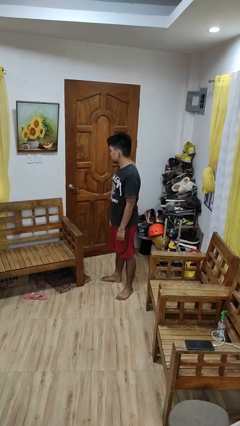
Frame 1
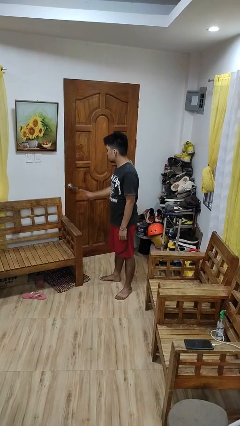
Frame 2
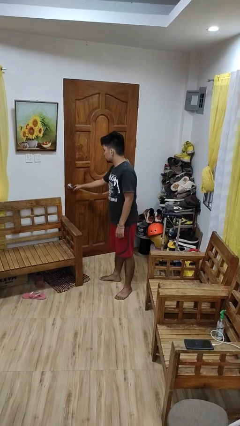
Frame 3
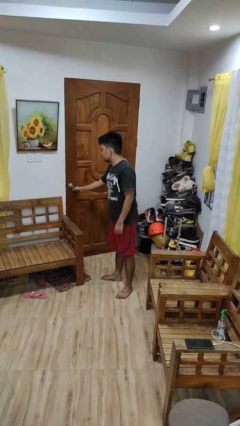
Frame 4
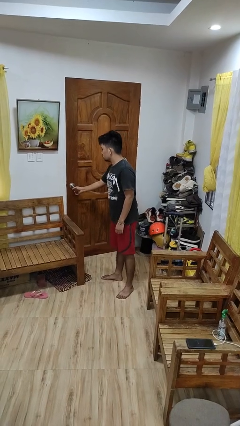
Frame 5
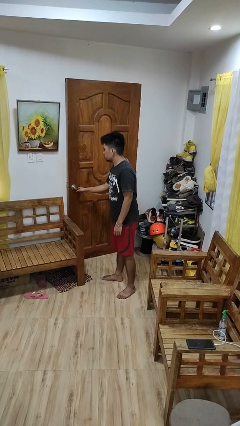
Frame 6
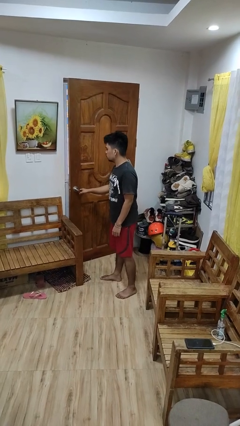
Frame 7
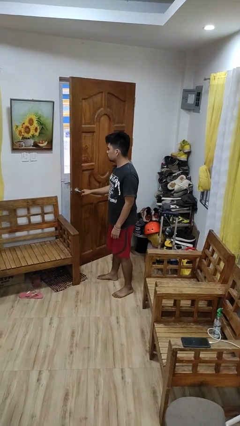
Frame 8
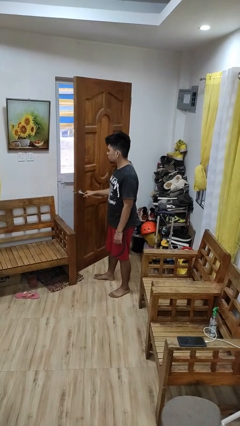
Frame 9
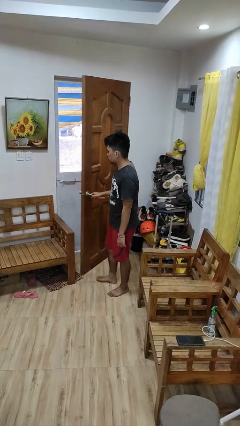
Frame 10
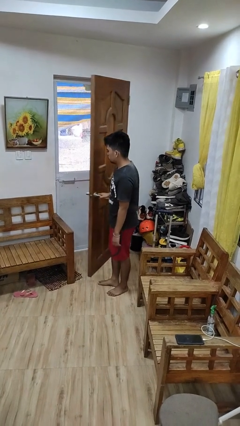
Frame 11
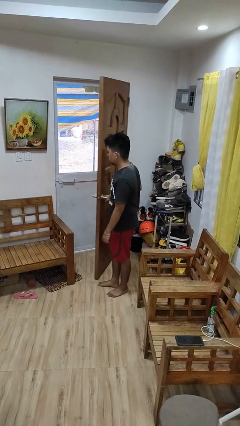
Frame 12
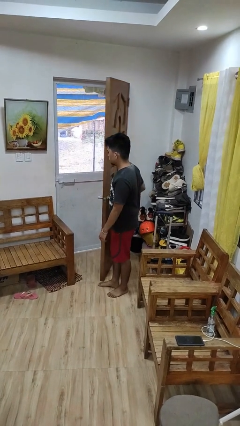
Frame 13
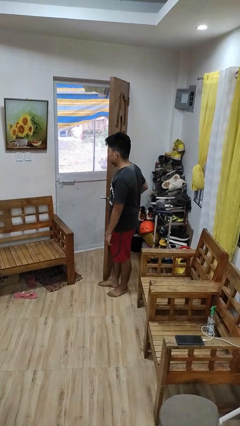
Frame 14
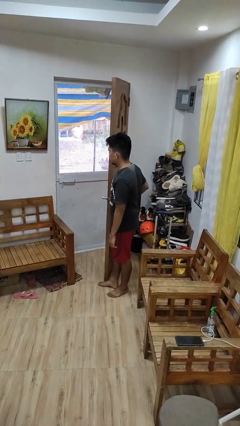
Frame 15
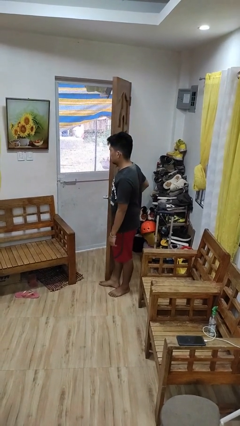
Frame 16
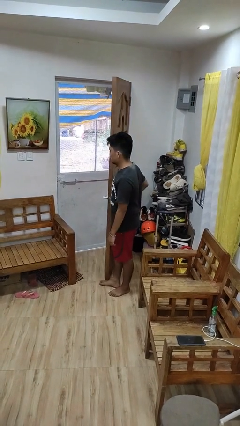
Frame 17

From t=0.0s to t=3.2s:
person opens facility door

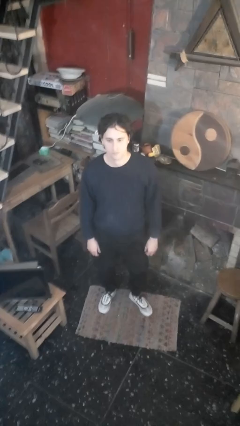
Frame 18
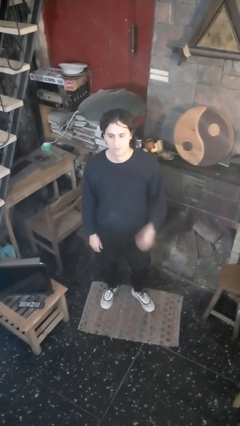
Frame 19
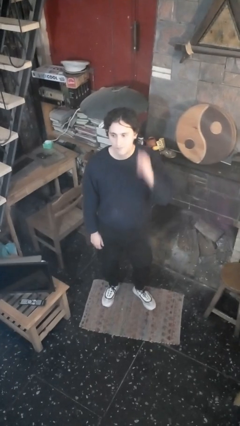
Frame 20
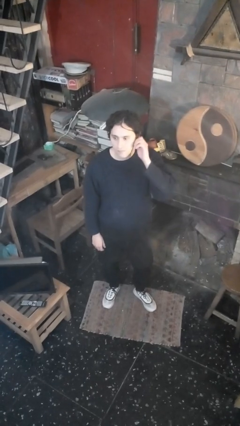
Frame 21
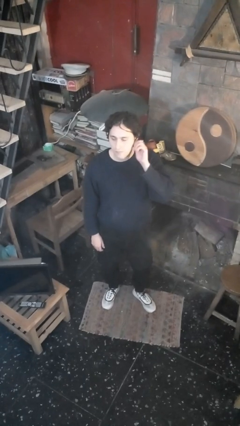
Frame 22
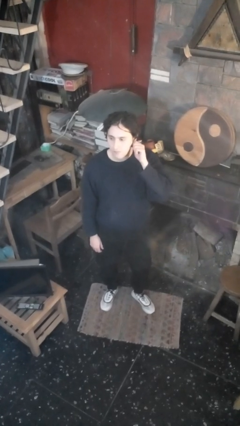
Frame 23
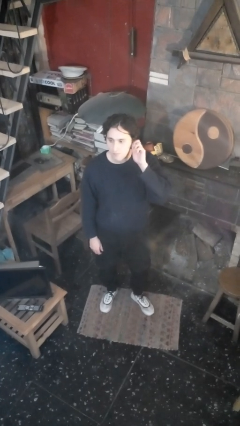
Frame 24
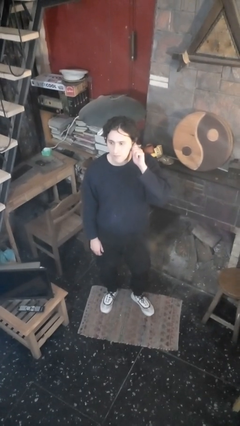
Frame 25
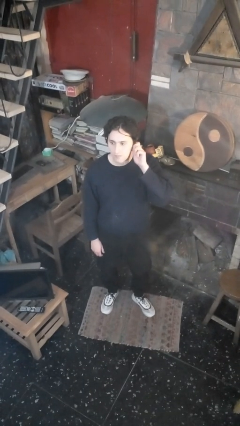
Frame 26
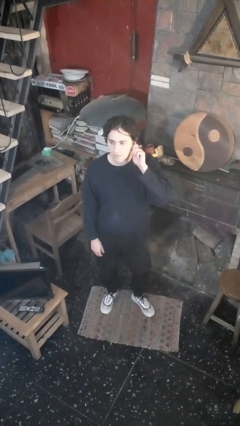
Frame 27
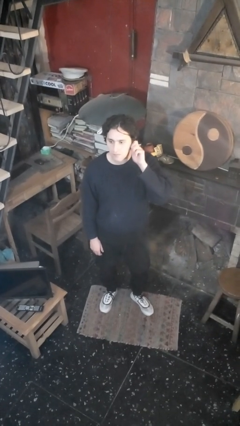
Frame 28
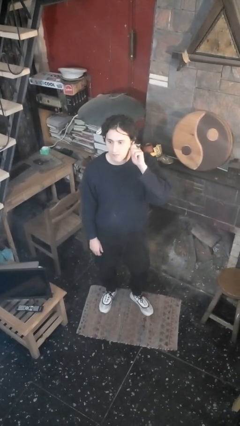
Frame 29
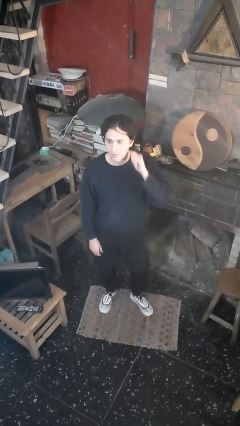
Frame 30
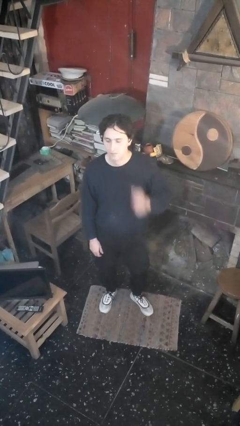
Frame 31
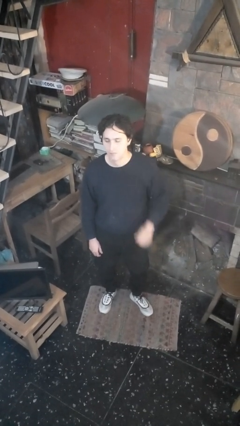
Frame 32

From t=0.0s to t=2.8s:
person touches earlobe

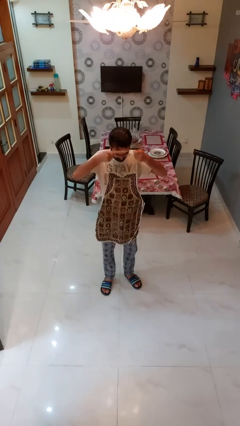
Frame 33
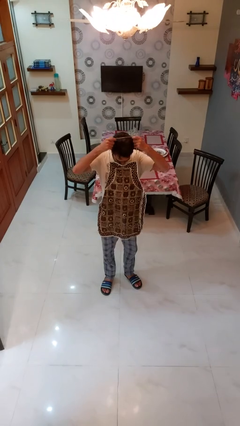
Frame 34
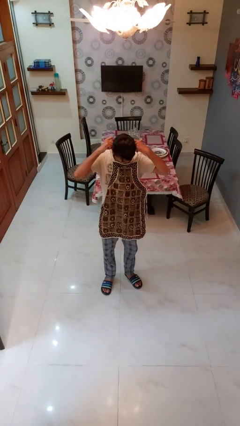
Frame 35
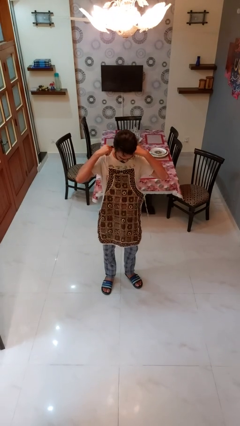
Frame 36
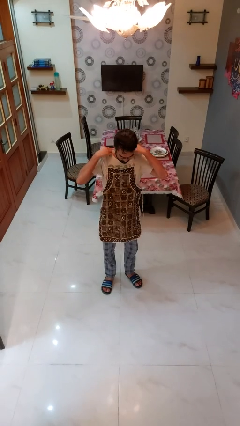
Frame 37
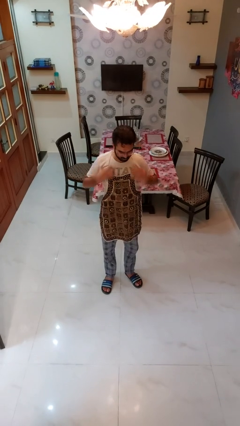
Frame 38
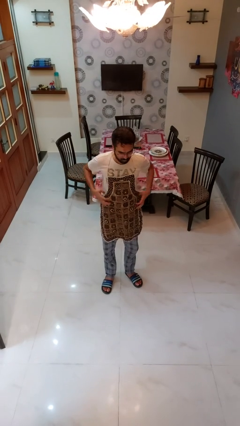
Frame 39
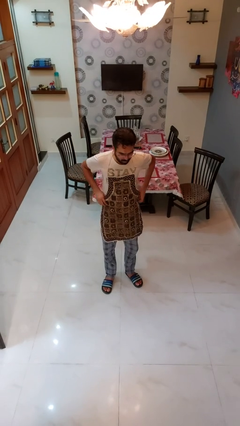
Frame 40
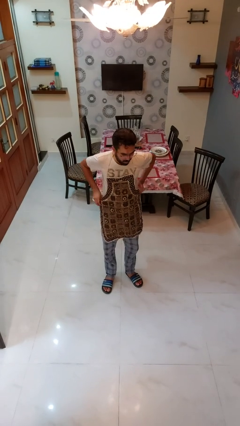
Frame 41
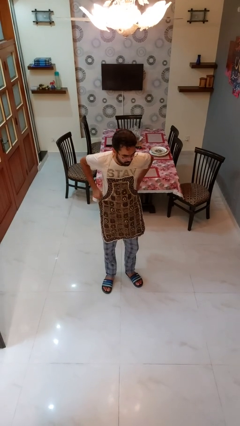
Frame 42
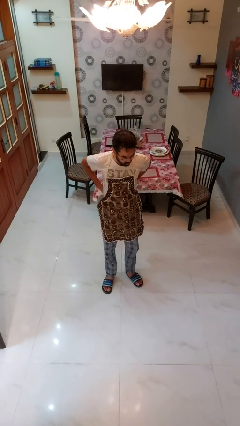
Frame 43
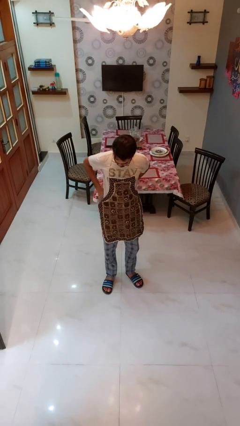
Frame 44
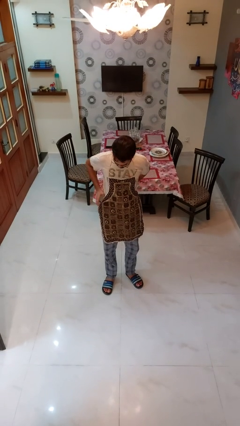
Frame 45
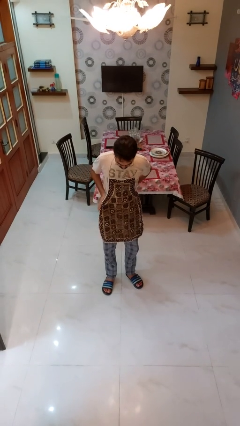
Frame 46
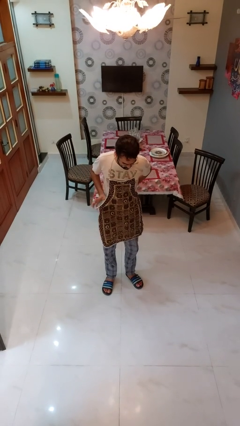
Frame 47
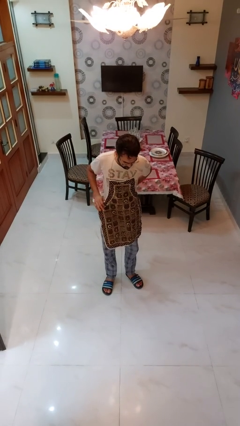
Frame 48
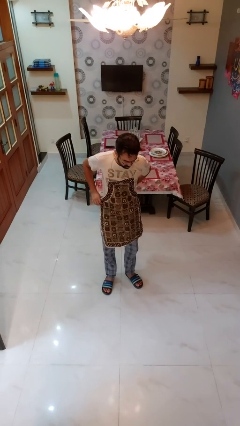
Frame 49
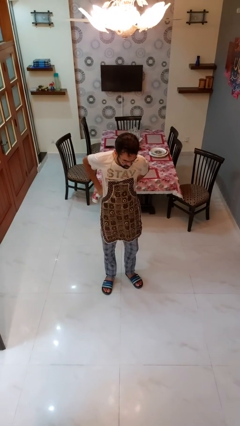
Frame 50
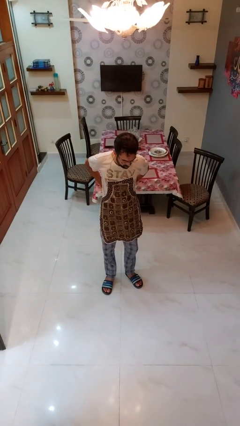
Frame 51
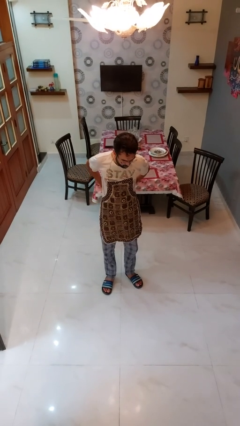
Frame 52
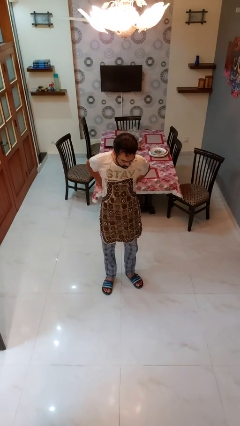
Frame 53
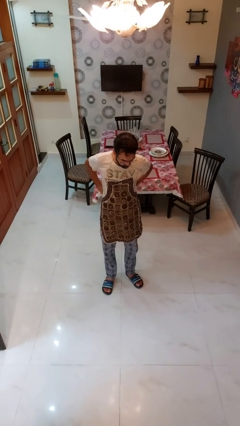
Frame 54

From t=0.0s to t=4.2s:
person puts on apron

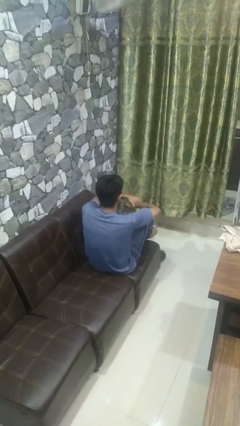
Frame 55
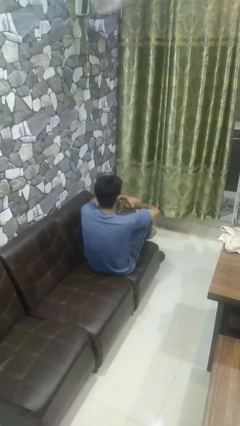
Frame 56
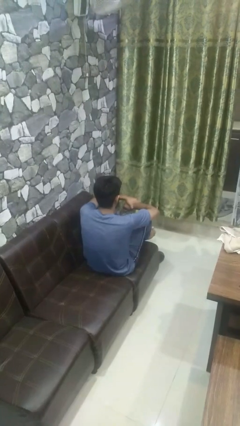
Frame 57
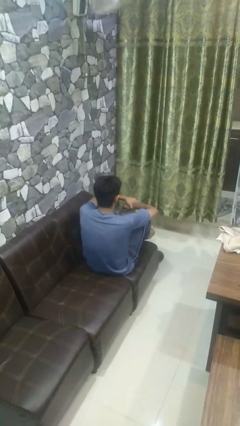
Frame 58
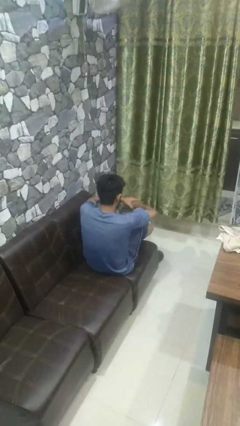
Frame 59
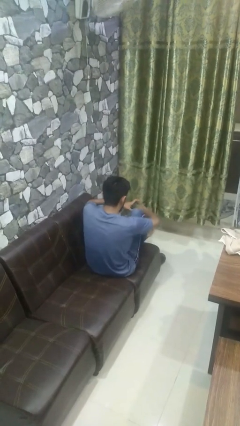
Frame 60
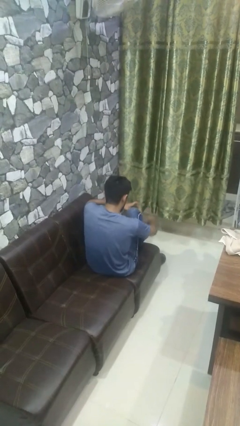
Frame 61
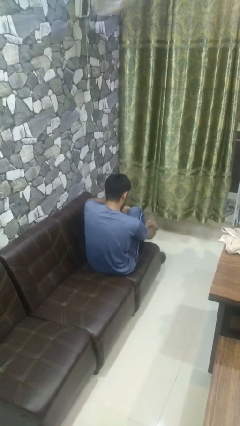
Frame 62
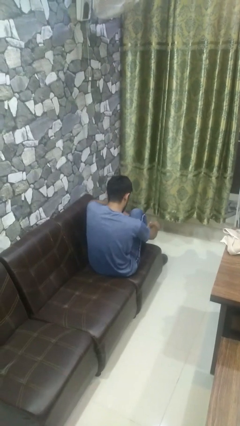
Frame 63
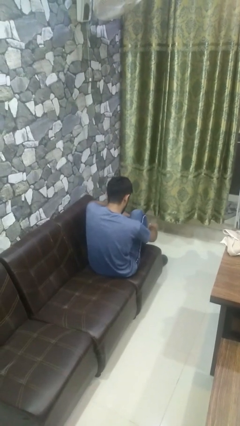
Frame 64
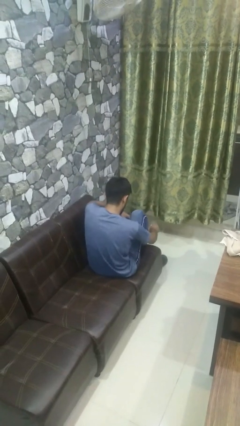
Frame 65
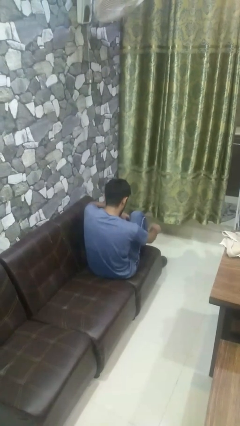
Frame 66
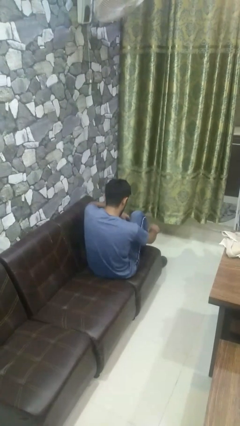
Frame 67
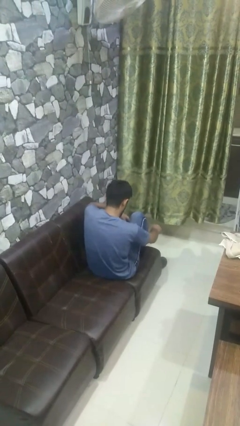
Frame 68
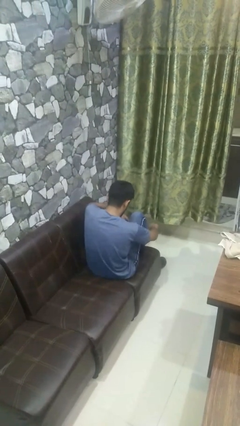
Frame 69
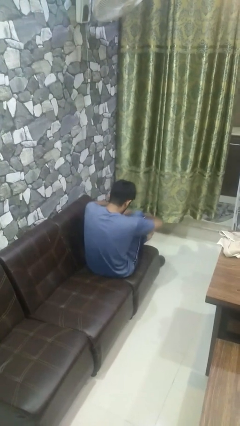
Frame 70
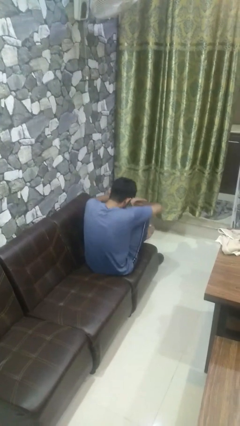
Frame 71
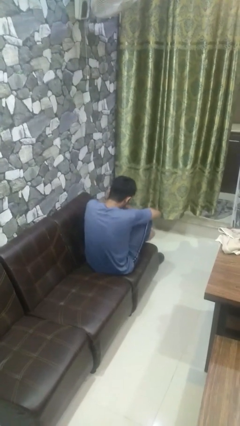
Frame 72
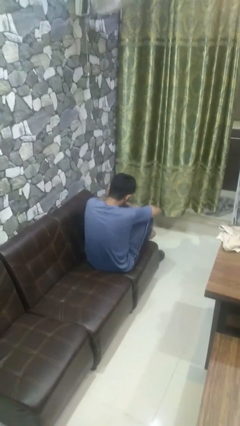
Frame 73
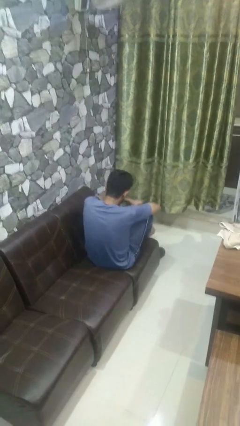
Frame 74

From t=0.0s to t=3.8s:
person rubs foot

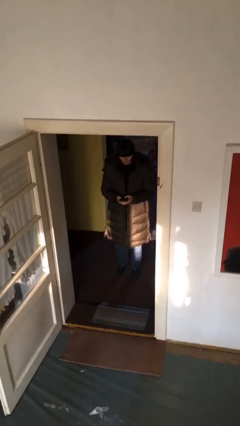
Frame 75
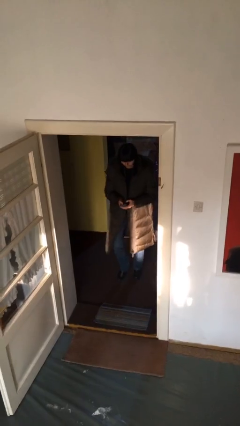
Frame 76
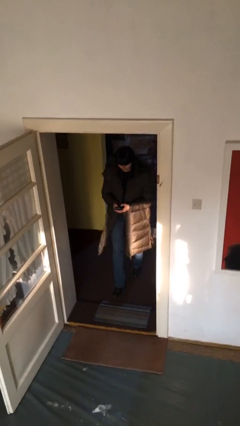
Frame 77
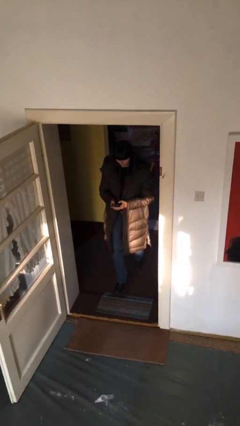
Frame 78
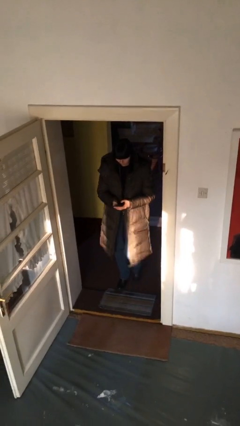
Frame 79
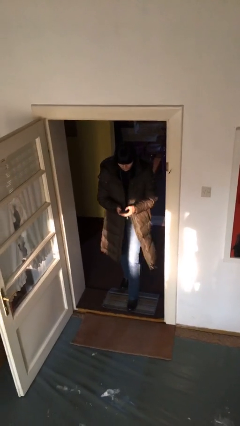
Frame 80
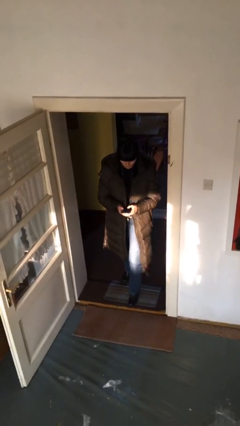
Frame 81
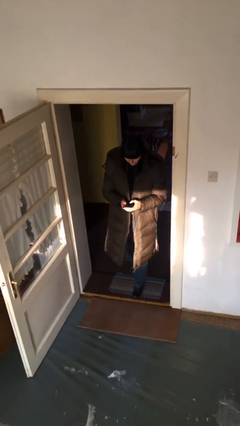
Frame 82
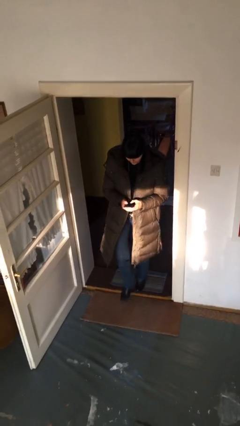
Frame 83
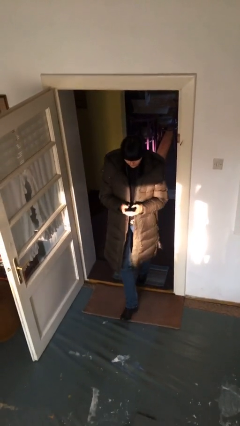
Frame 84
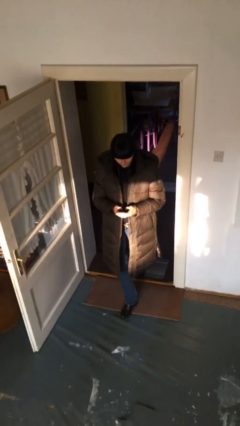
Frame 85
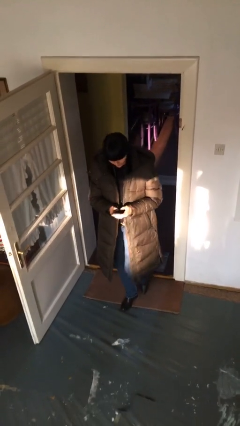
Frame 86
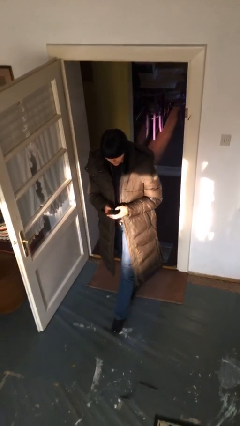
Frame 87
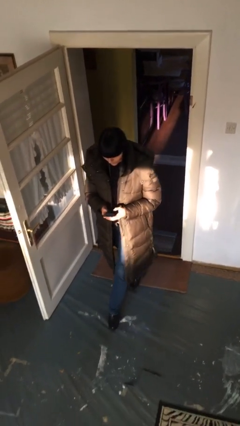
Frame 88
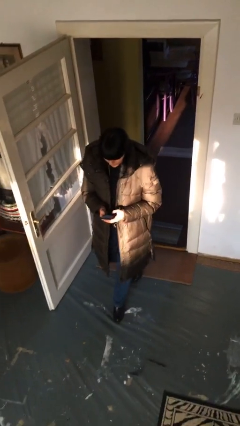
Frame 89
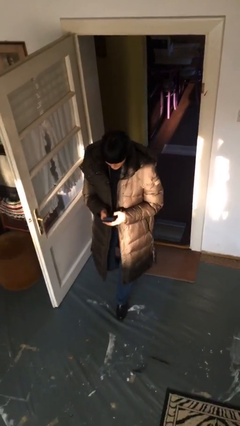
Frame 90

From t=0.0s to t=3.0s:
person enters scene through structure

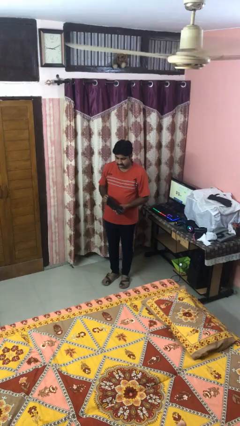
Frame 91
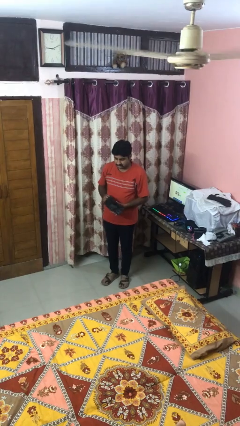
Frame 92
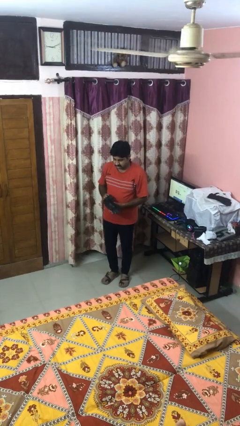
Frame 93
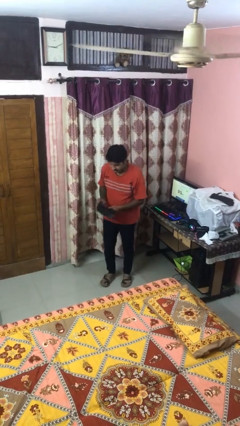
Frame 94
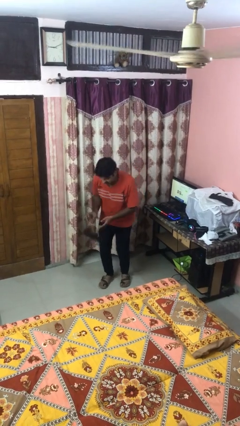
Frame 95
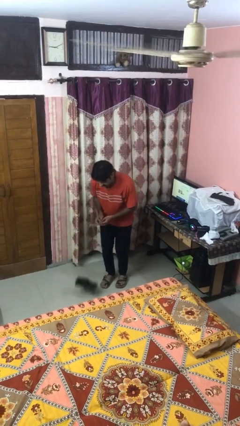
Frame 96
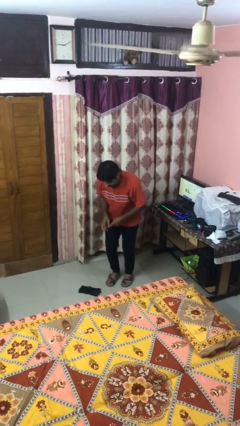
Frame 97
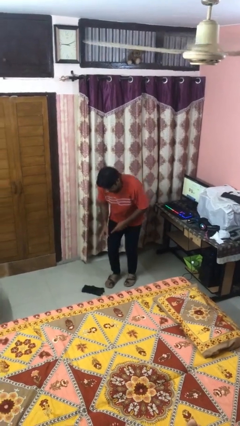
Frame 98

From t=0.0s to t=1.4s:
person drops object
